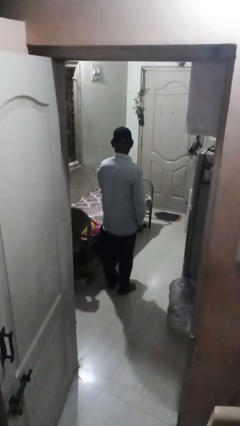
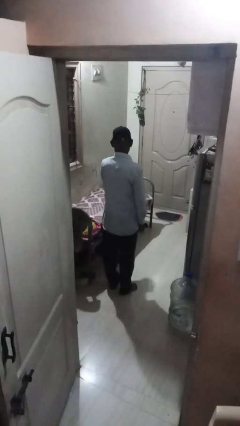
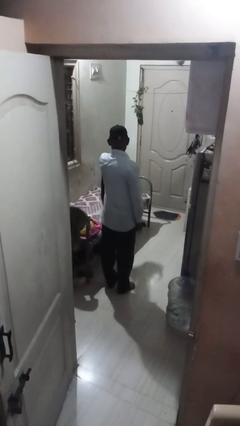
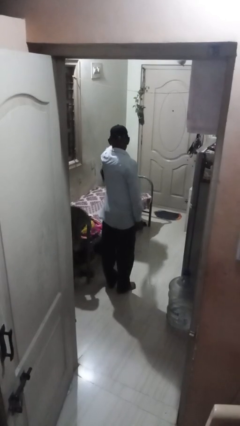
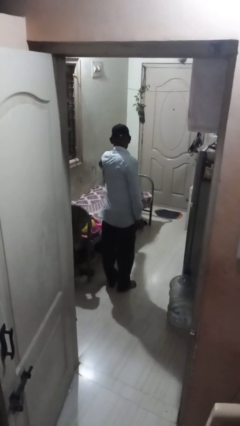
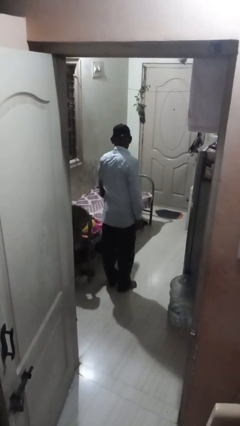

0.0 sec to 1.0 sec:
person throws object on bed

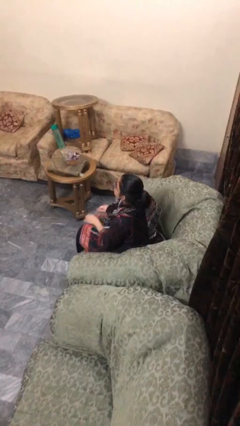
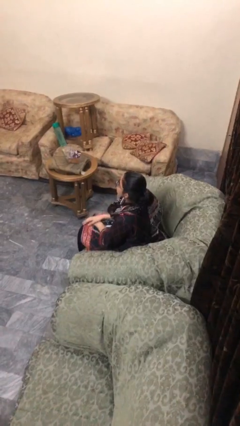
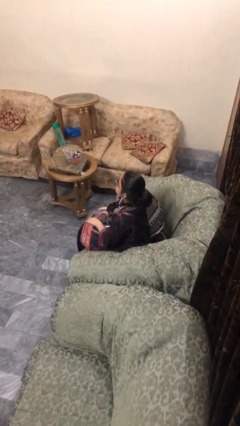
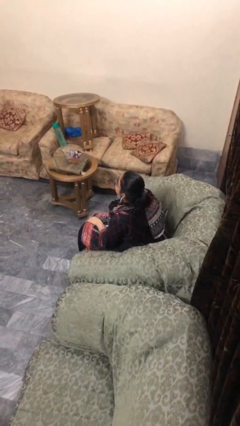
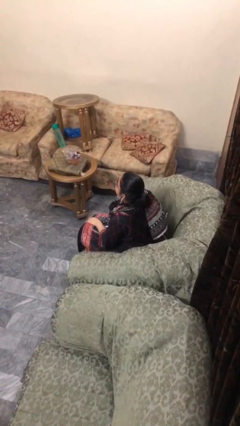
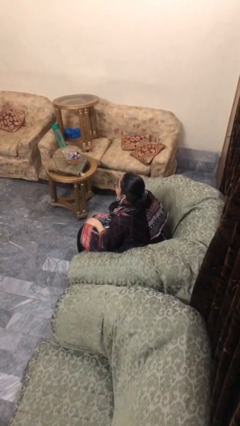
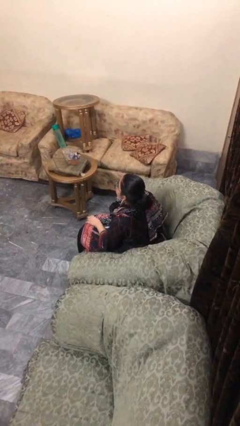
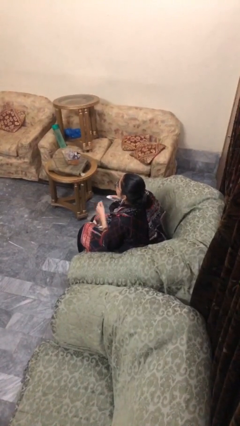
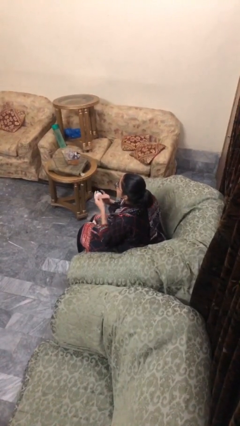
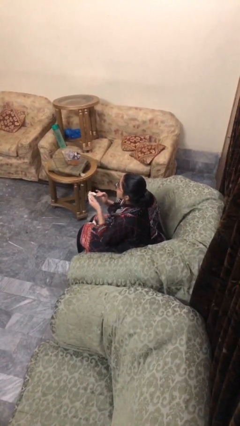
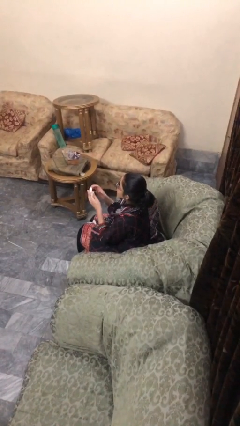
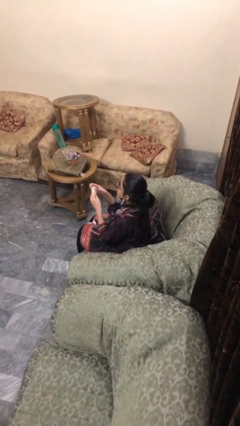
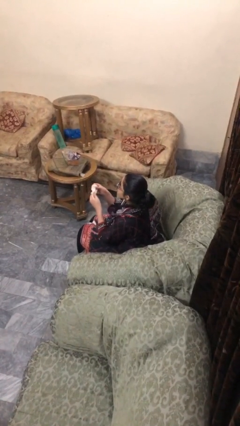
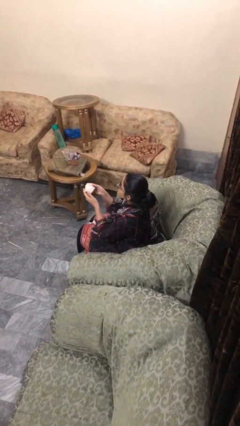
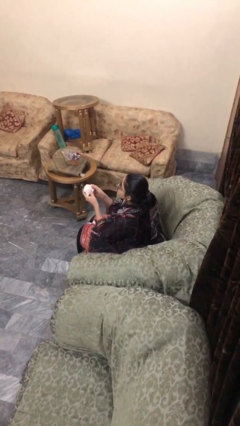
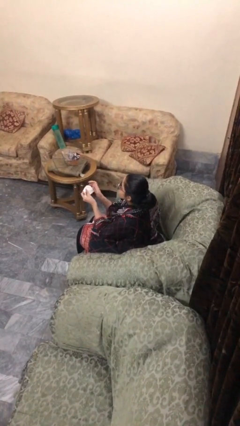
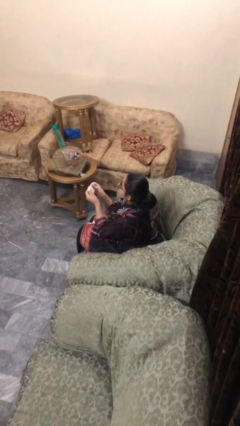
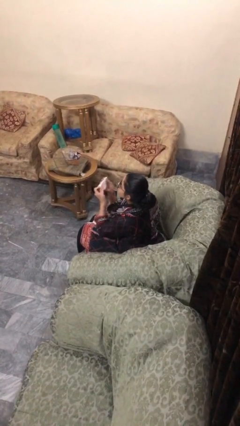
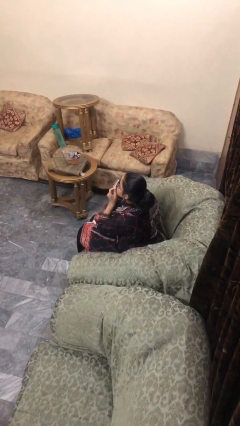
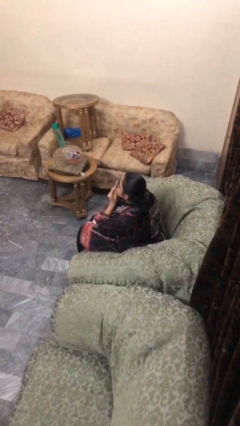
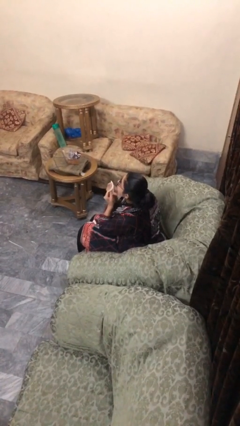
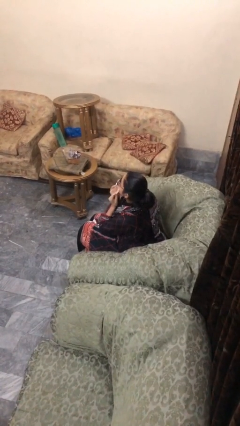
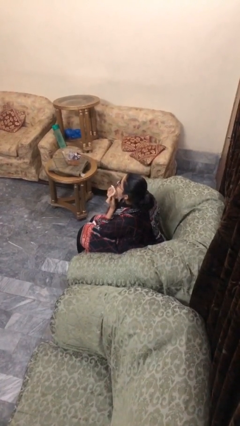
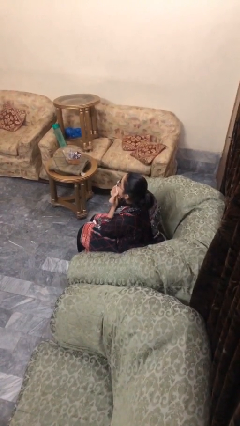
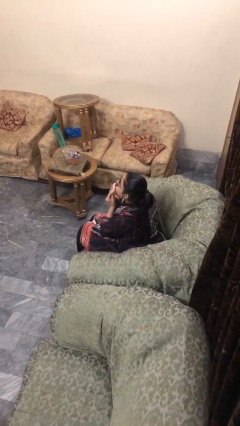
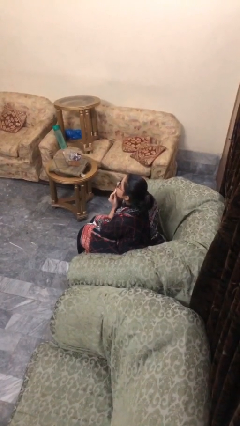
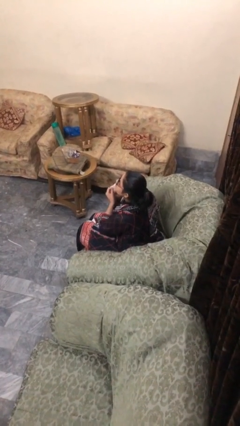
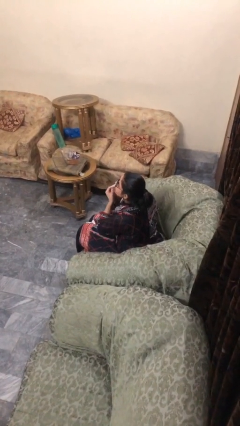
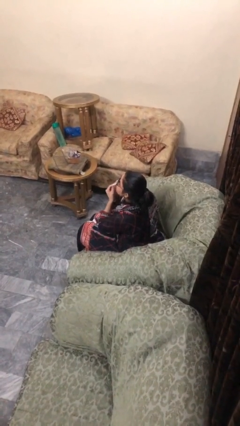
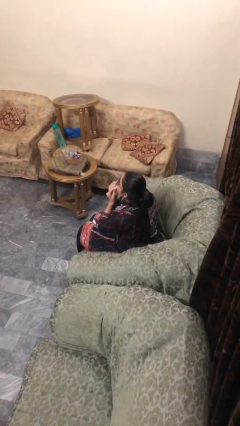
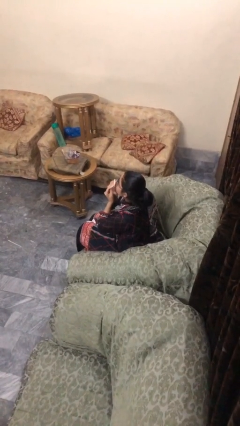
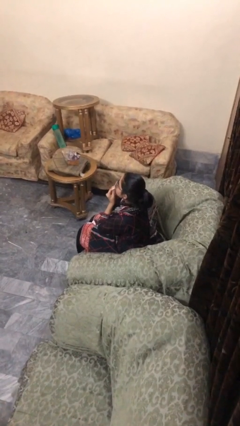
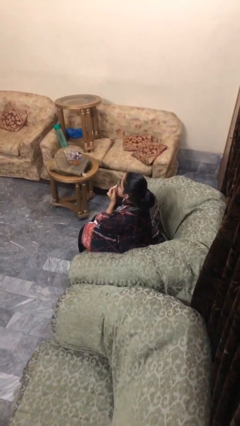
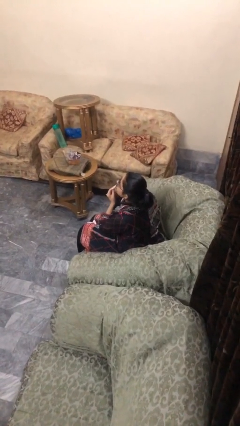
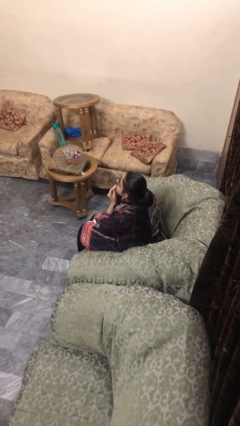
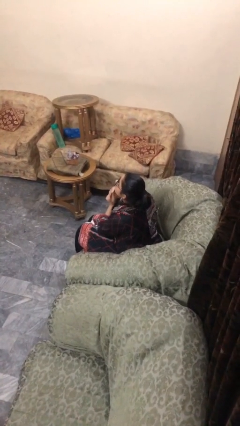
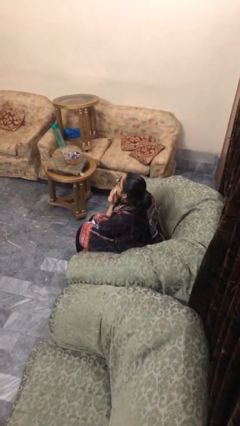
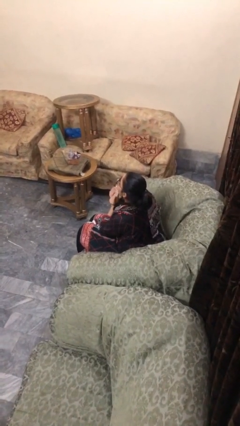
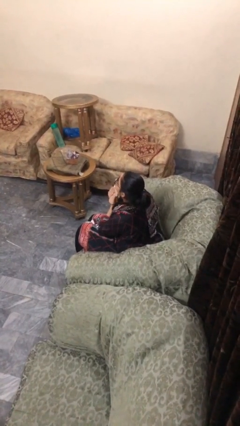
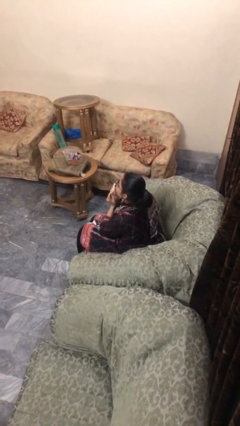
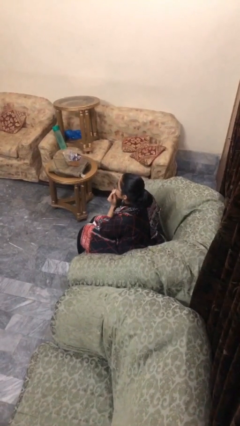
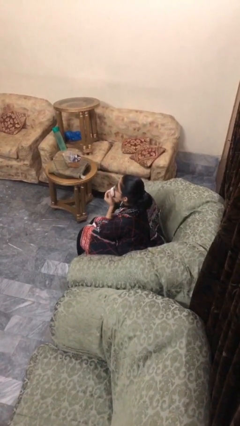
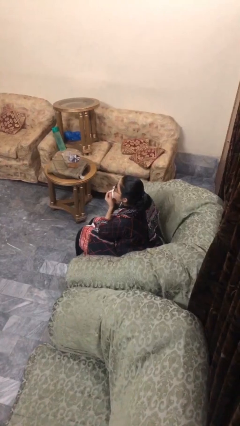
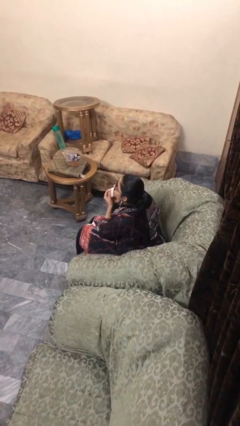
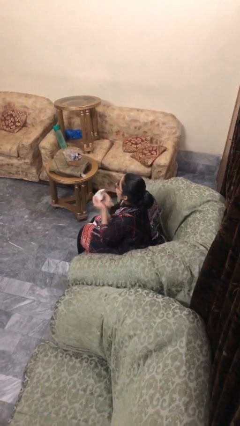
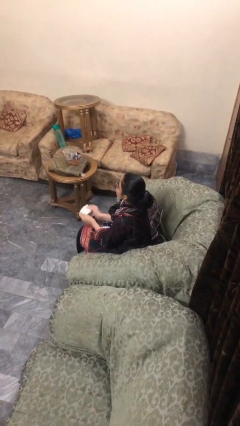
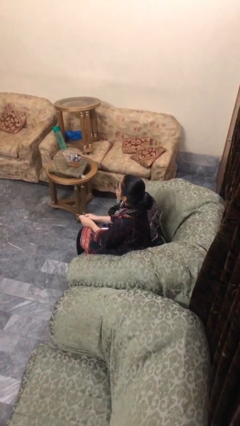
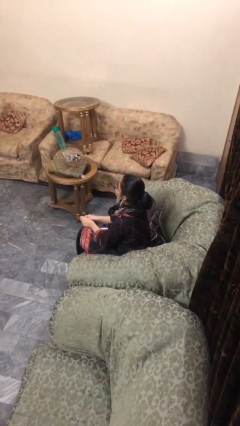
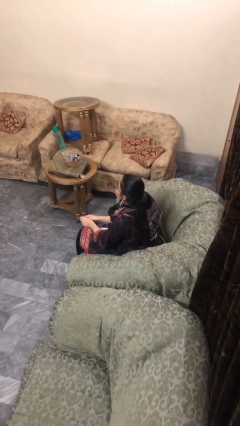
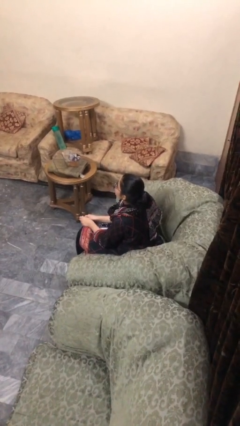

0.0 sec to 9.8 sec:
person wipes mouth with napkin

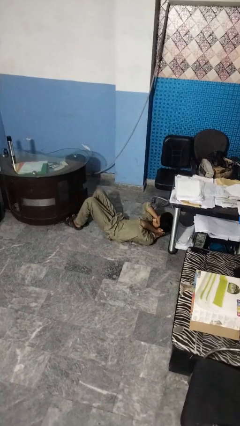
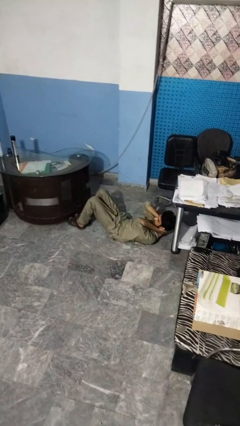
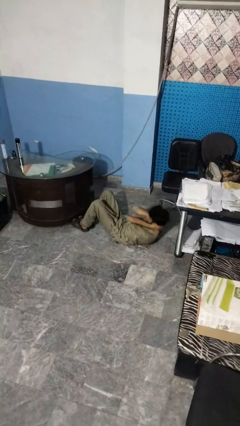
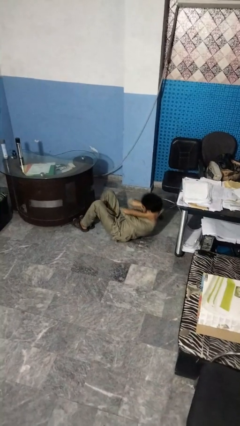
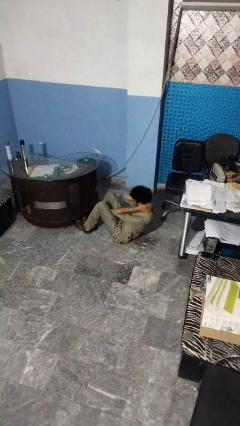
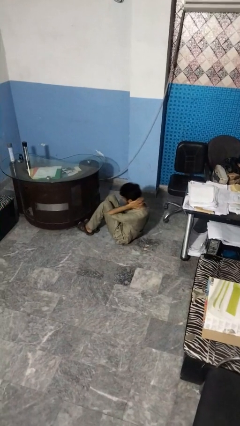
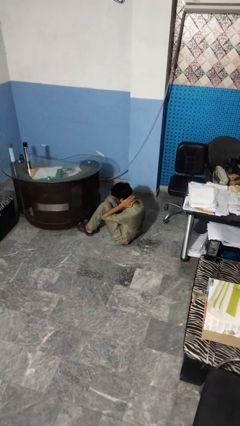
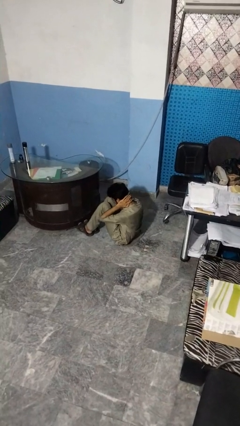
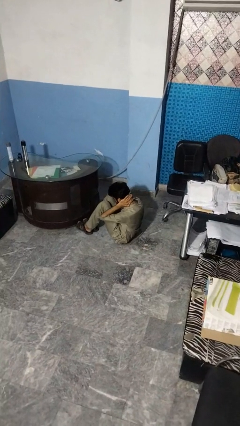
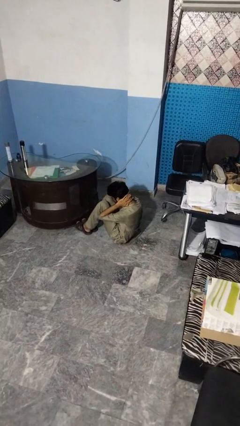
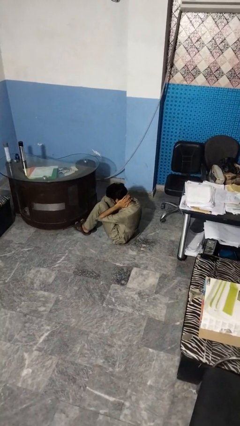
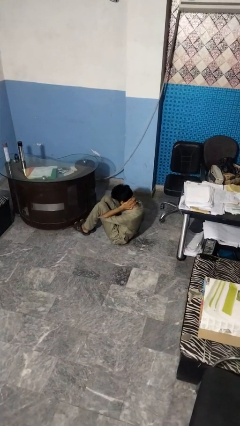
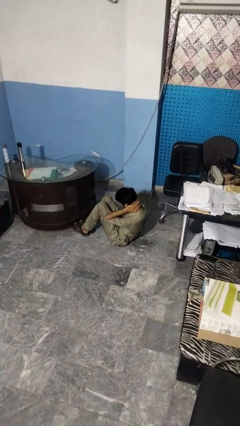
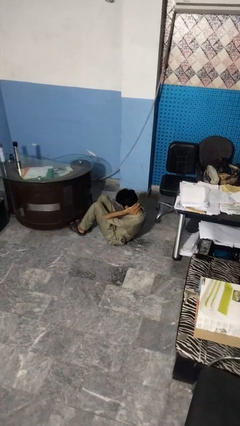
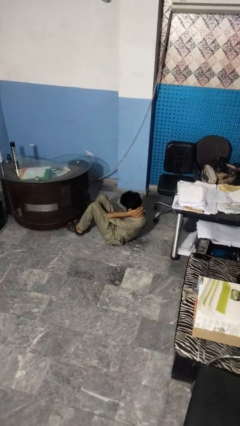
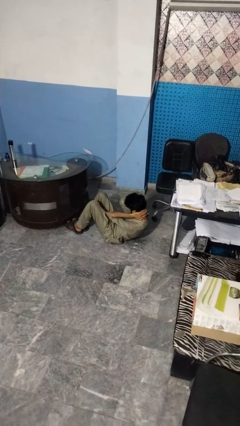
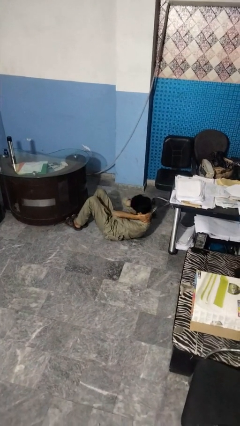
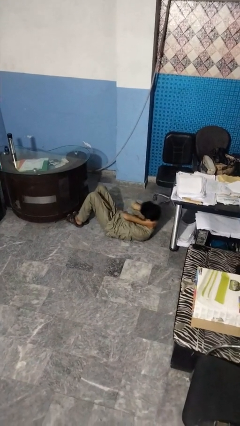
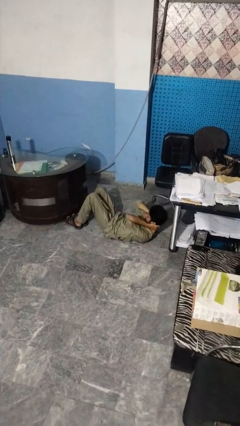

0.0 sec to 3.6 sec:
person exercises with situp

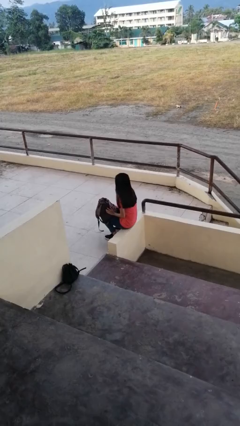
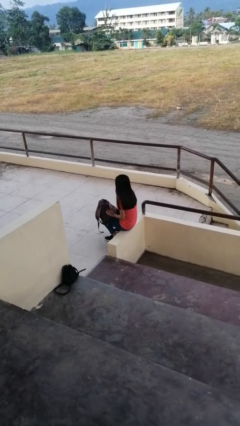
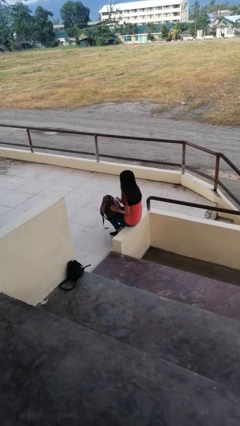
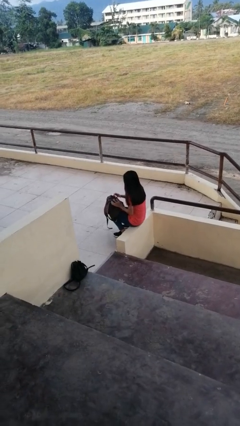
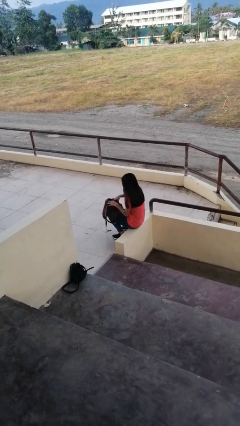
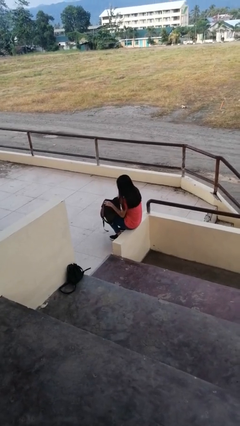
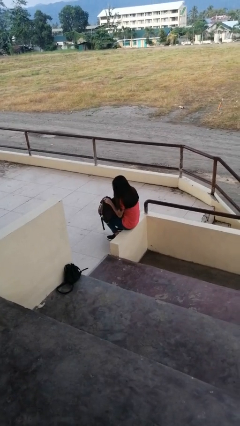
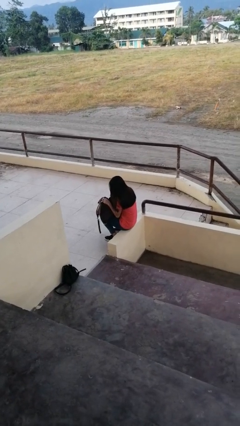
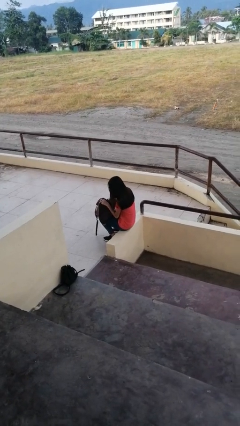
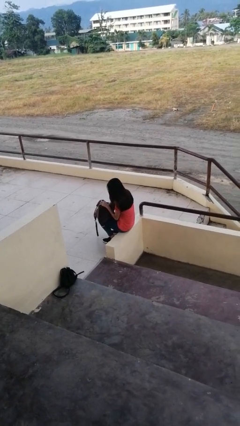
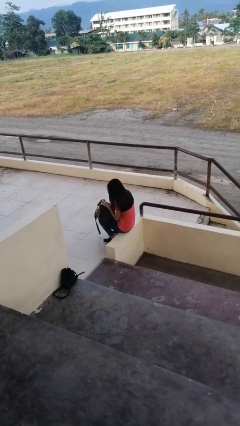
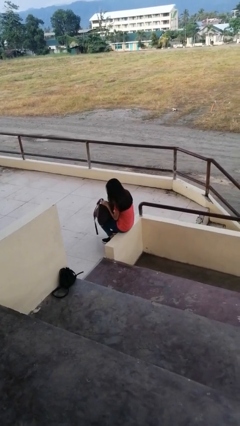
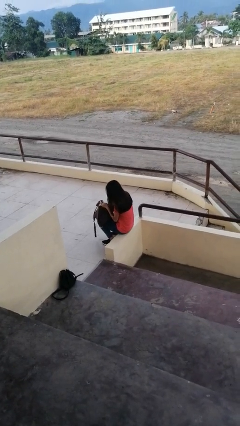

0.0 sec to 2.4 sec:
person searches in backpack

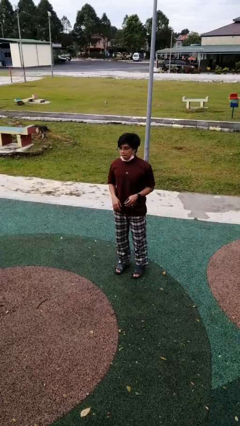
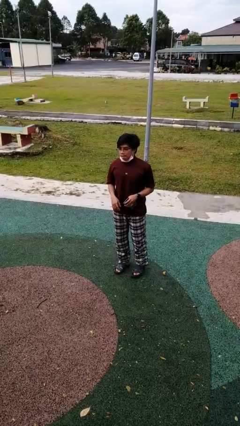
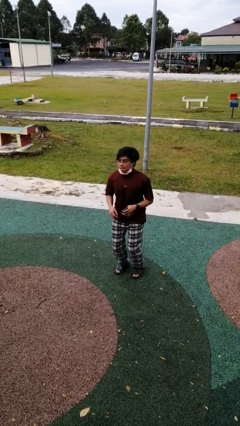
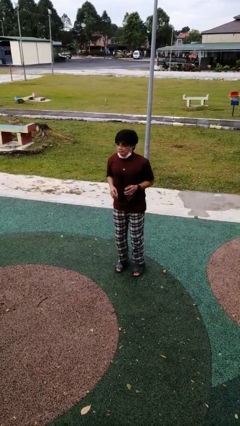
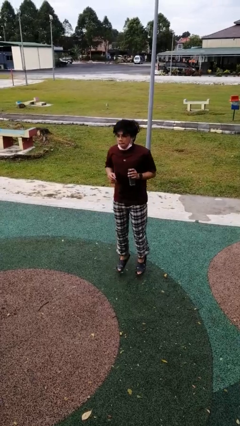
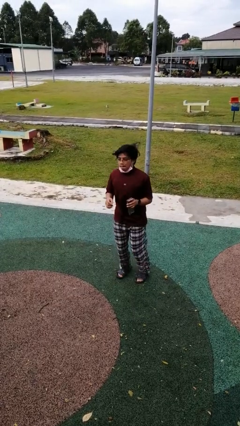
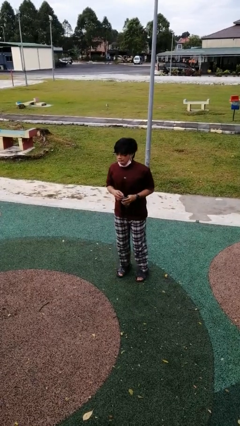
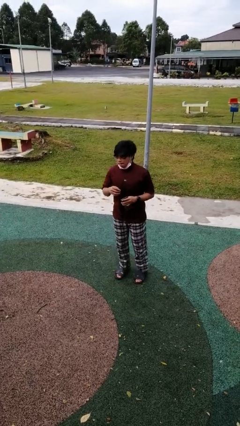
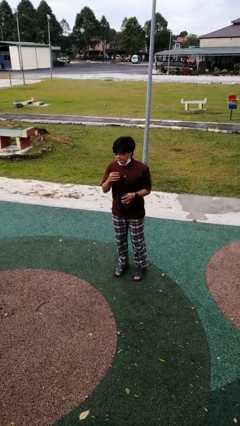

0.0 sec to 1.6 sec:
person jumps
